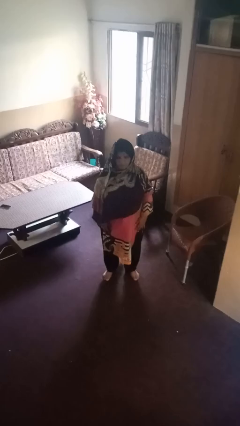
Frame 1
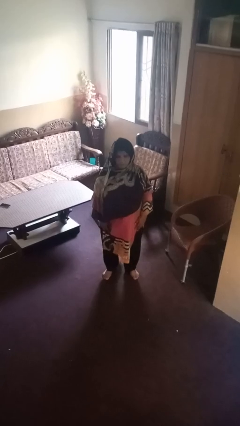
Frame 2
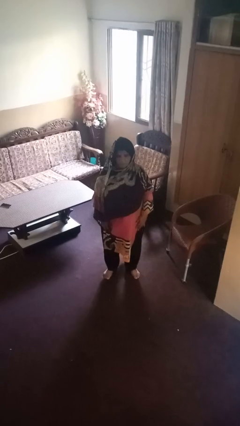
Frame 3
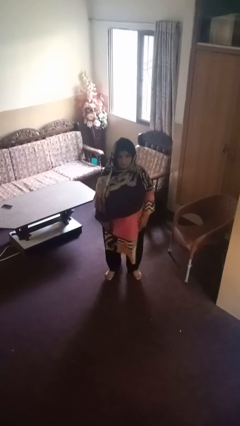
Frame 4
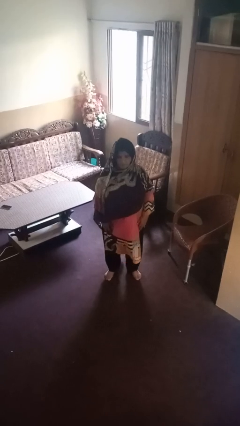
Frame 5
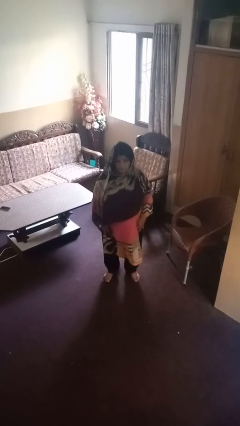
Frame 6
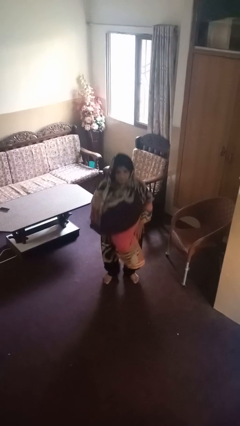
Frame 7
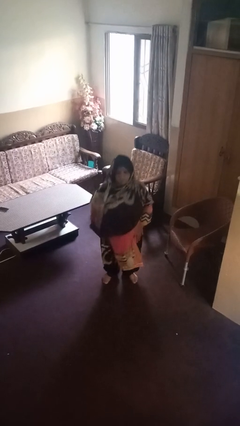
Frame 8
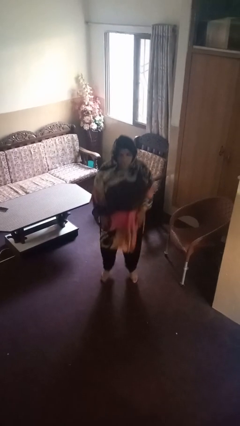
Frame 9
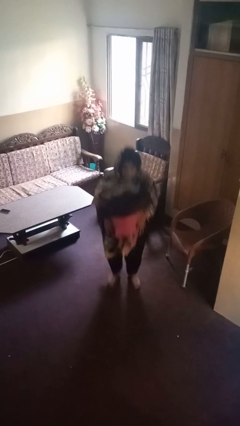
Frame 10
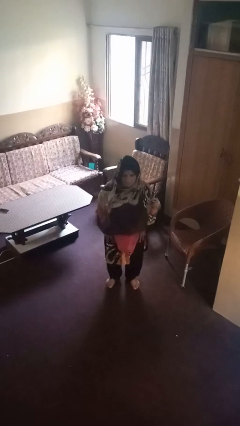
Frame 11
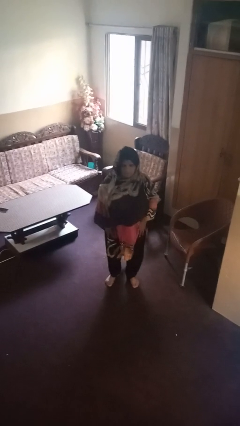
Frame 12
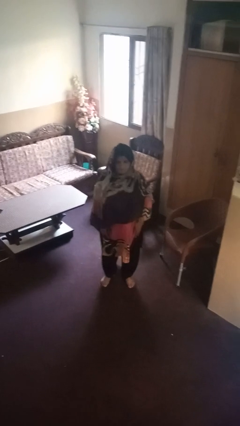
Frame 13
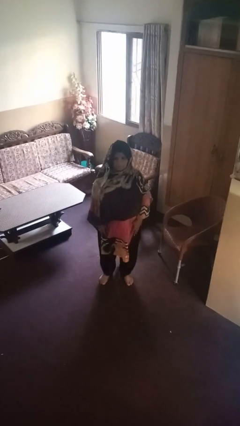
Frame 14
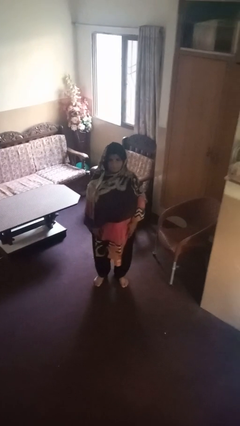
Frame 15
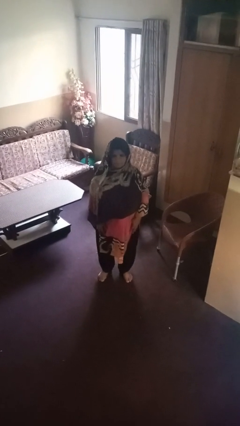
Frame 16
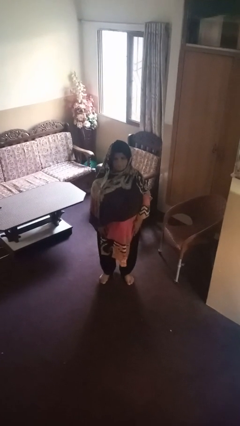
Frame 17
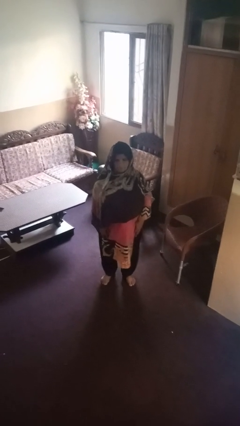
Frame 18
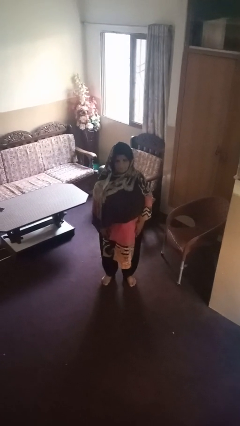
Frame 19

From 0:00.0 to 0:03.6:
person jumps

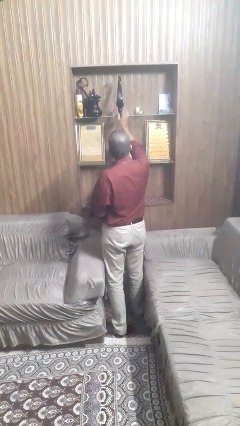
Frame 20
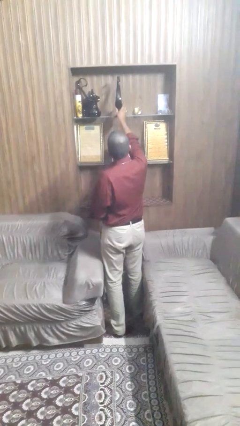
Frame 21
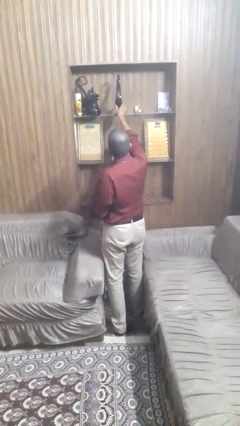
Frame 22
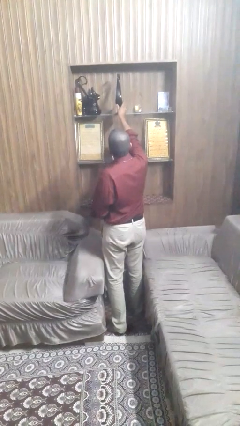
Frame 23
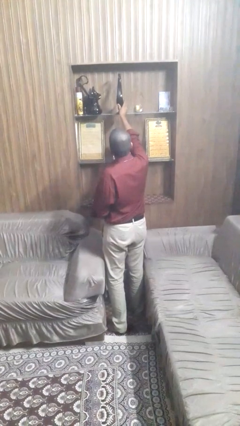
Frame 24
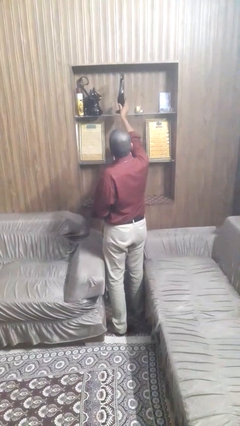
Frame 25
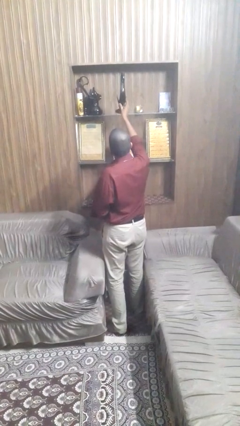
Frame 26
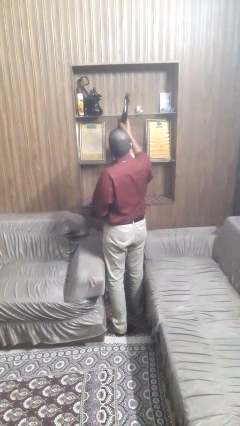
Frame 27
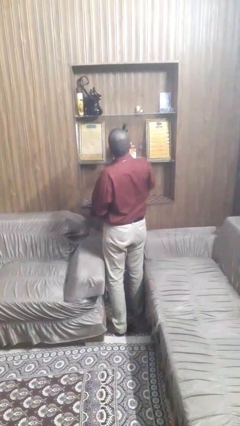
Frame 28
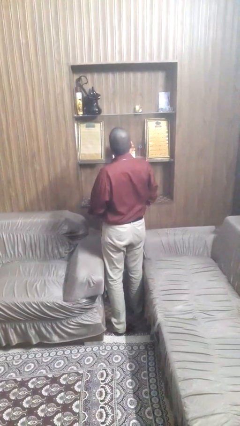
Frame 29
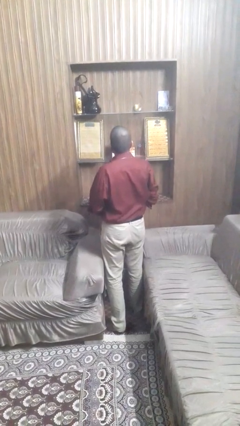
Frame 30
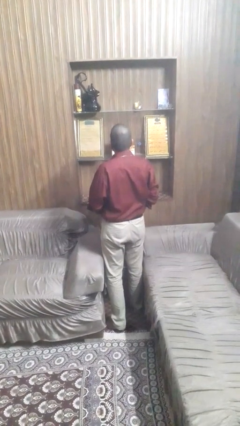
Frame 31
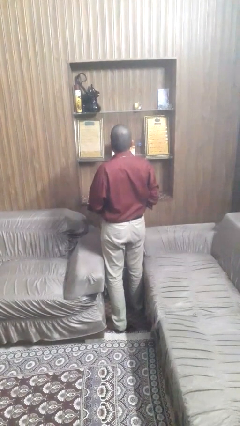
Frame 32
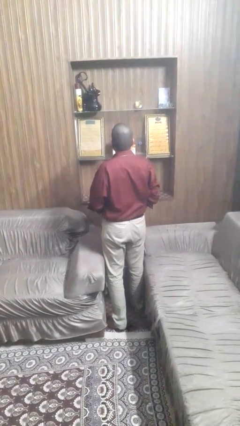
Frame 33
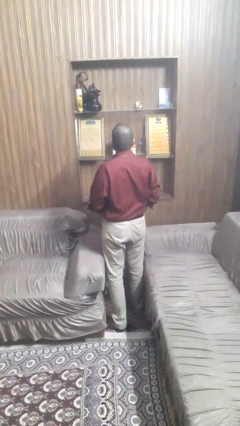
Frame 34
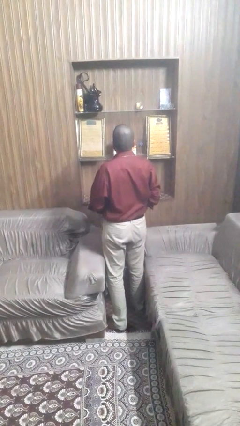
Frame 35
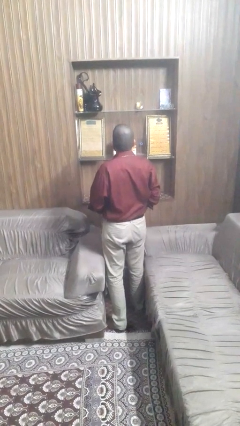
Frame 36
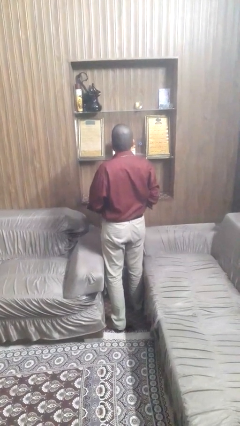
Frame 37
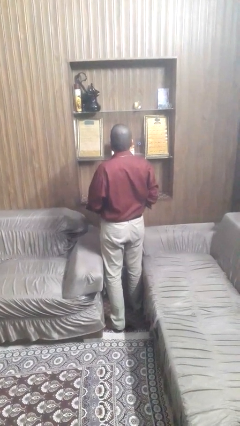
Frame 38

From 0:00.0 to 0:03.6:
person picks up object from shelf

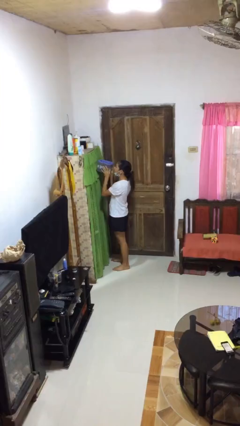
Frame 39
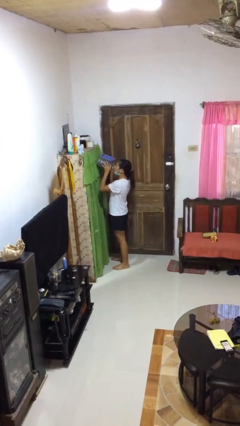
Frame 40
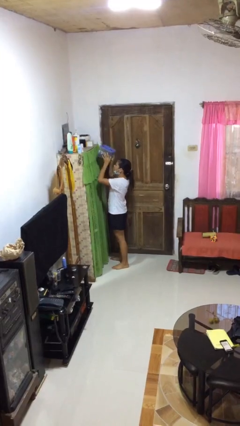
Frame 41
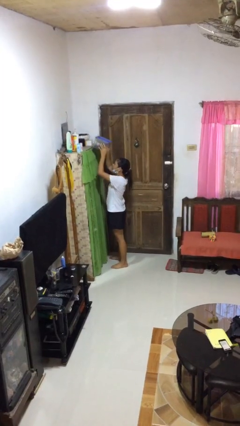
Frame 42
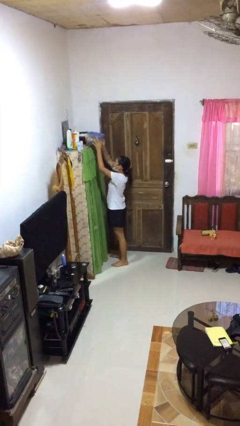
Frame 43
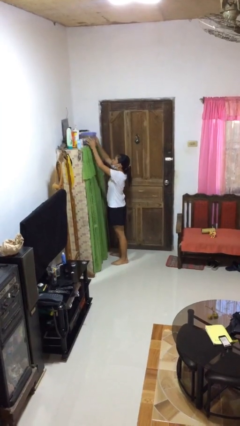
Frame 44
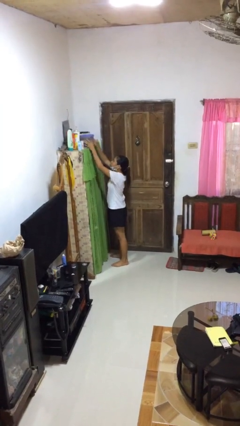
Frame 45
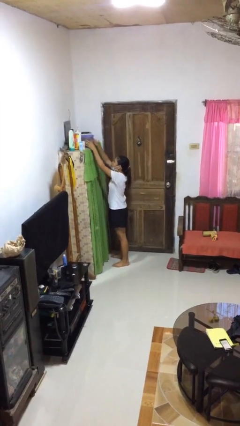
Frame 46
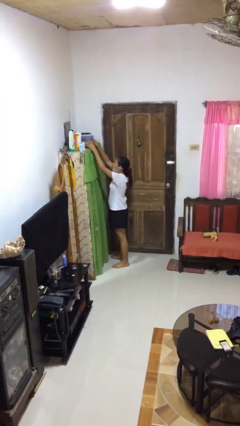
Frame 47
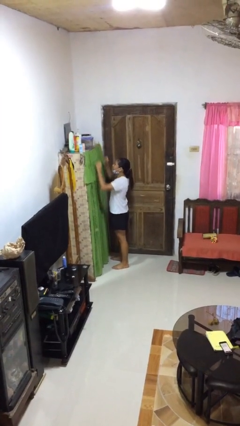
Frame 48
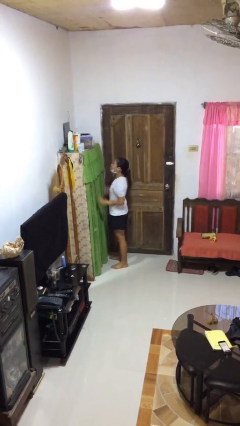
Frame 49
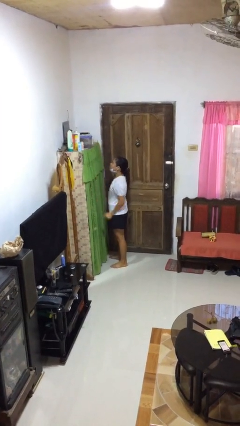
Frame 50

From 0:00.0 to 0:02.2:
person puts down object on shelf

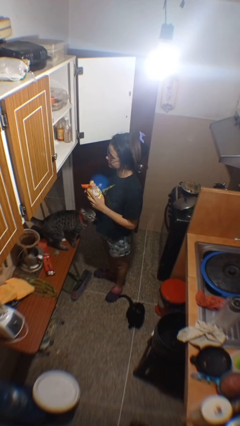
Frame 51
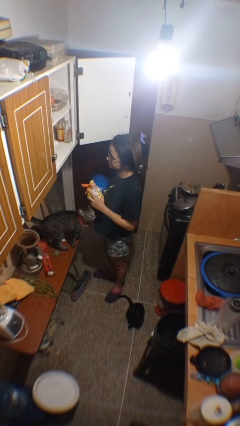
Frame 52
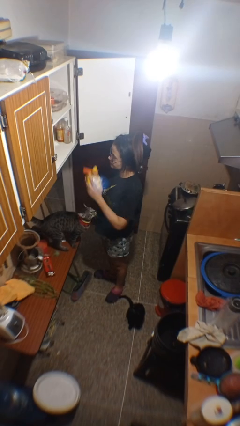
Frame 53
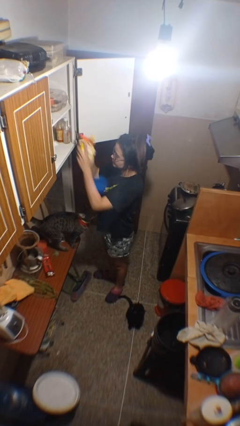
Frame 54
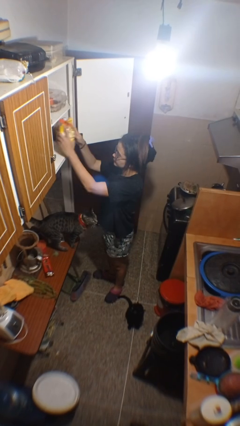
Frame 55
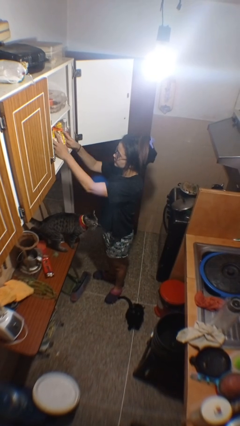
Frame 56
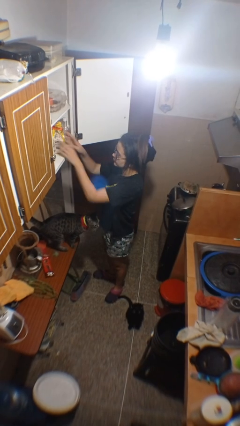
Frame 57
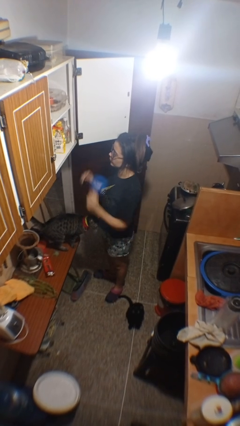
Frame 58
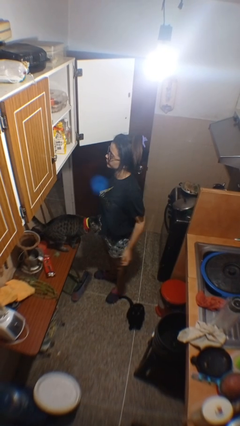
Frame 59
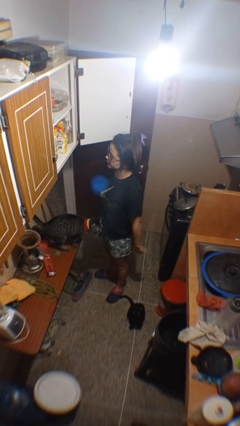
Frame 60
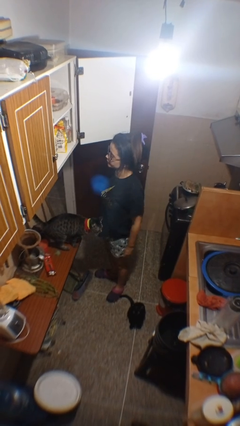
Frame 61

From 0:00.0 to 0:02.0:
person puts down object into cabinet

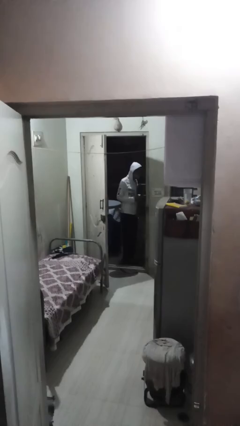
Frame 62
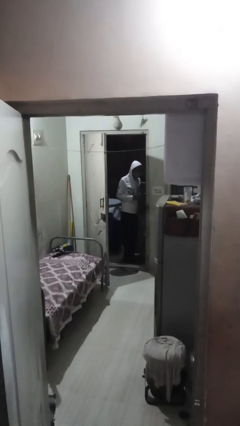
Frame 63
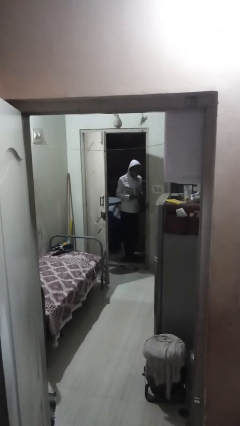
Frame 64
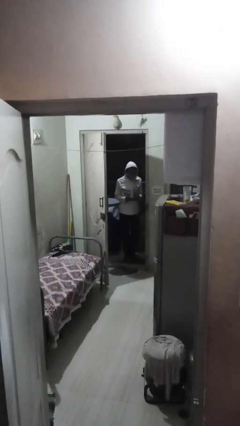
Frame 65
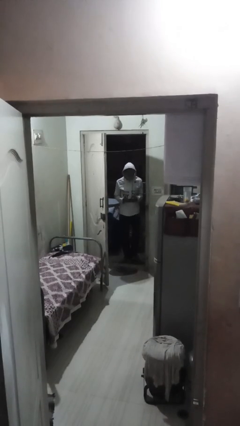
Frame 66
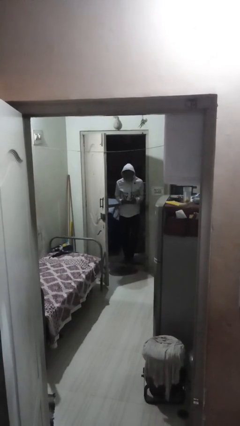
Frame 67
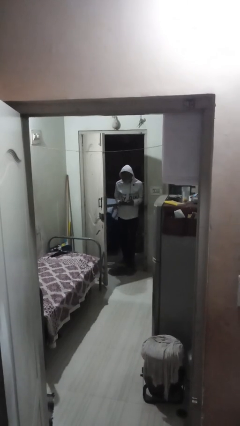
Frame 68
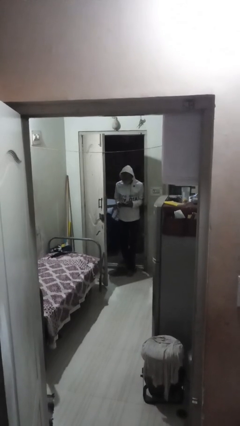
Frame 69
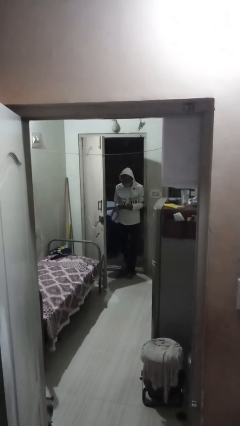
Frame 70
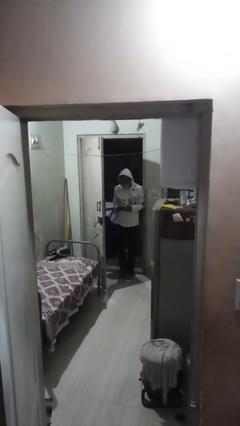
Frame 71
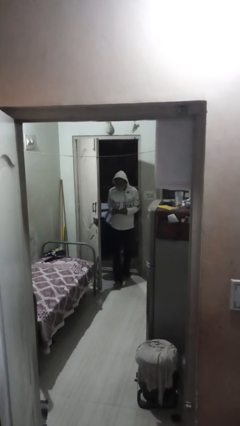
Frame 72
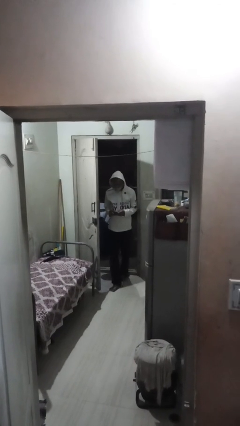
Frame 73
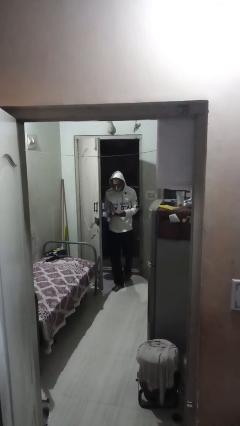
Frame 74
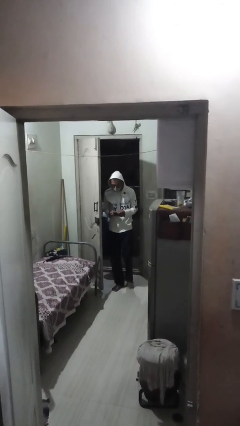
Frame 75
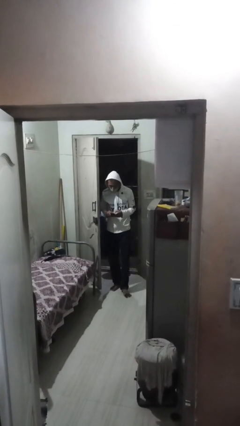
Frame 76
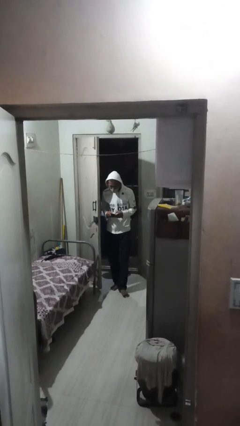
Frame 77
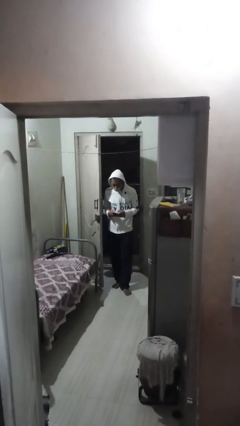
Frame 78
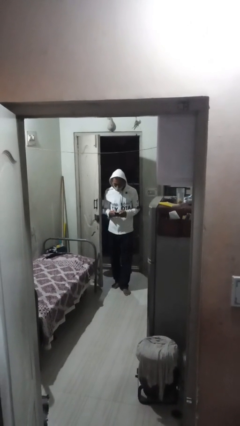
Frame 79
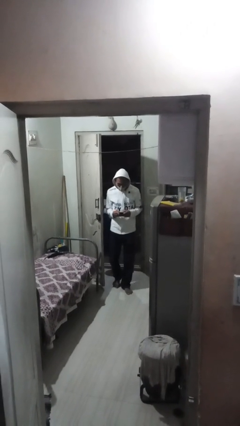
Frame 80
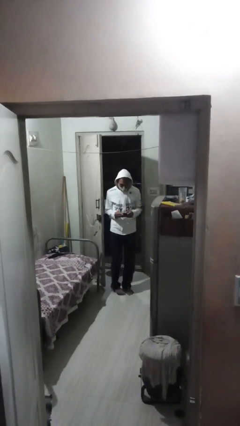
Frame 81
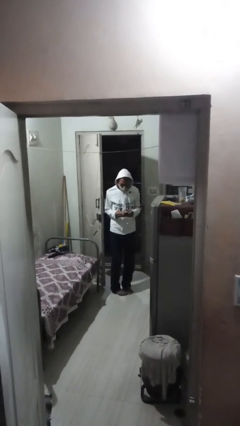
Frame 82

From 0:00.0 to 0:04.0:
person enters scene through structure

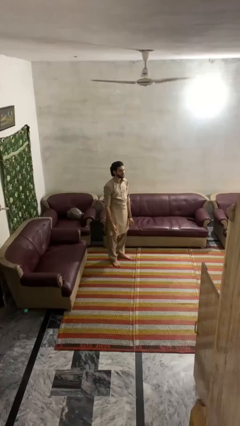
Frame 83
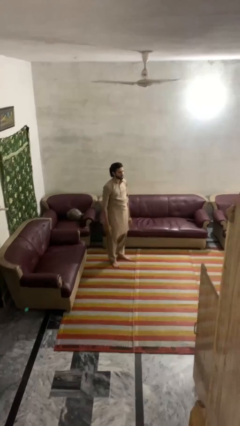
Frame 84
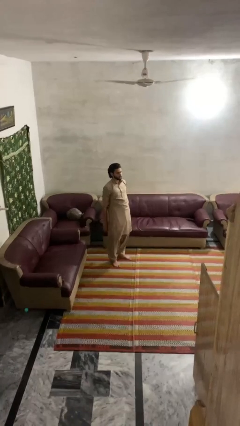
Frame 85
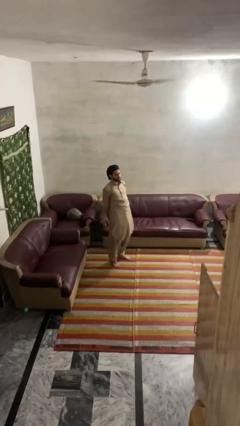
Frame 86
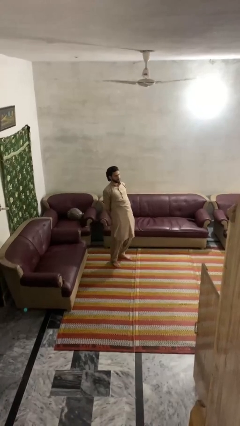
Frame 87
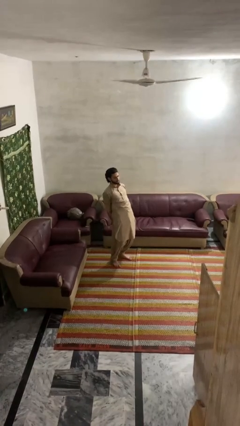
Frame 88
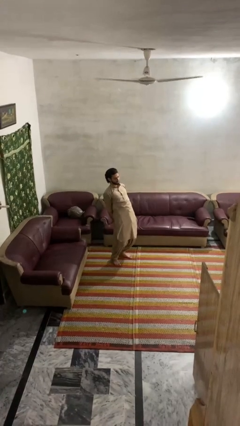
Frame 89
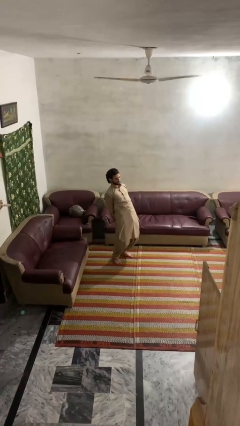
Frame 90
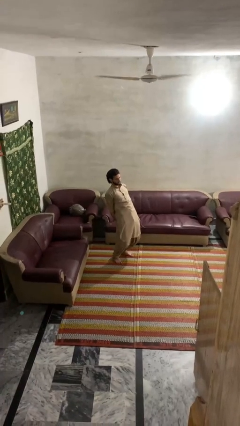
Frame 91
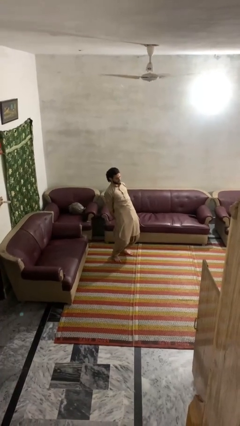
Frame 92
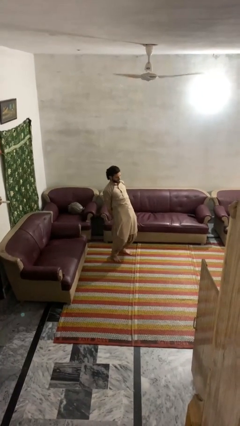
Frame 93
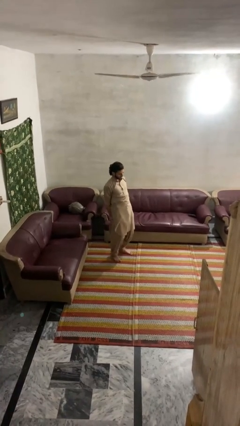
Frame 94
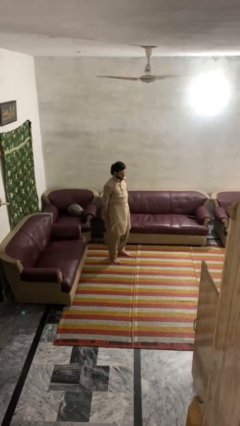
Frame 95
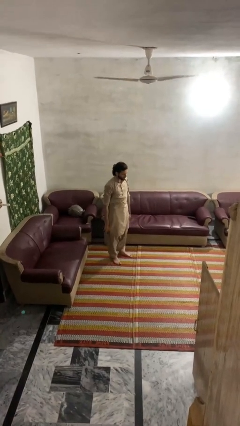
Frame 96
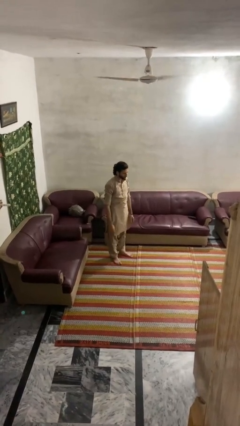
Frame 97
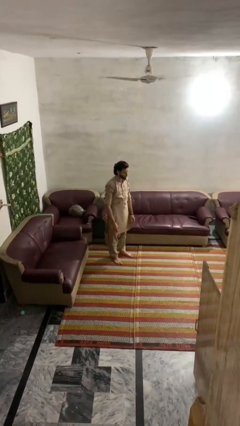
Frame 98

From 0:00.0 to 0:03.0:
person stretches back
